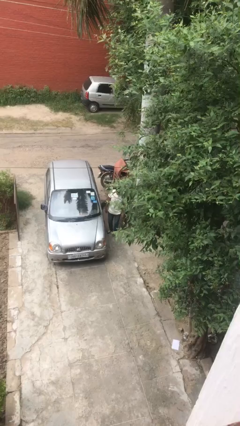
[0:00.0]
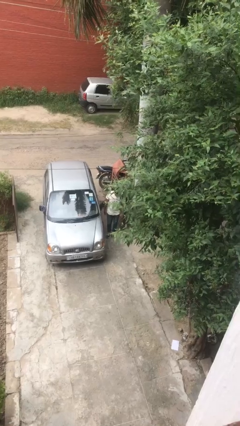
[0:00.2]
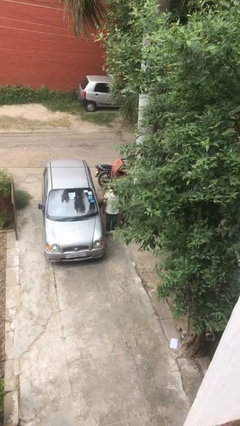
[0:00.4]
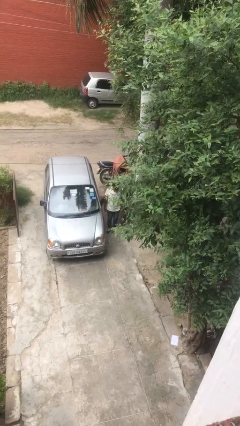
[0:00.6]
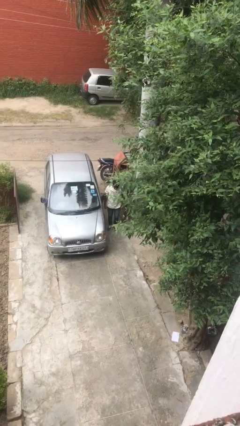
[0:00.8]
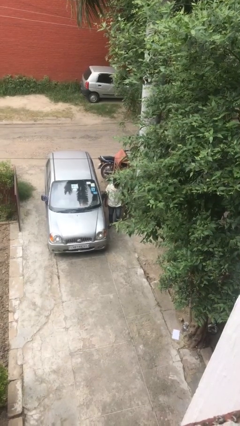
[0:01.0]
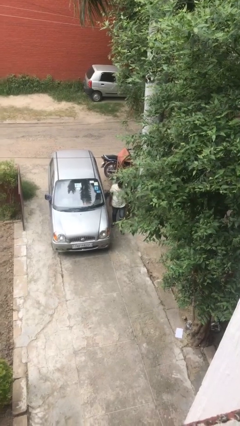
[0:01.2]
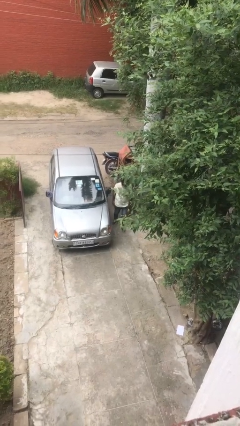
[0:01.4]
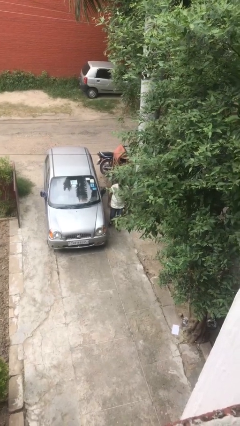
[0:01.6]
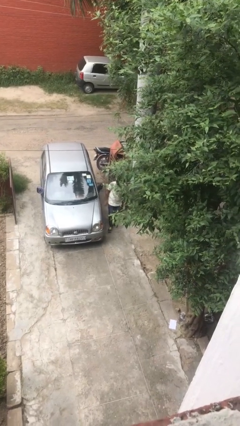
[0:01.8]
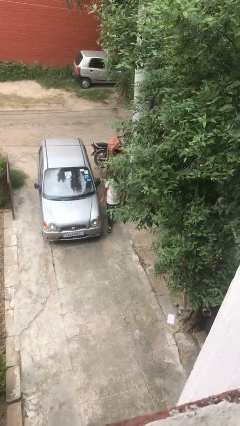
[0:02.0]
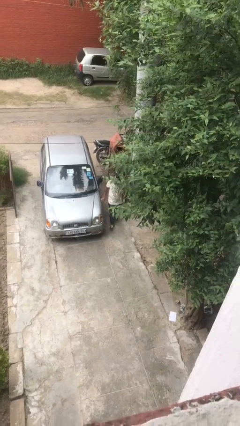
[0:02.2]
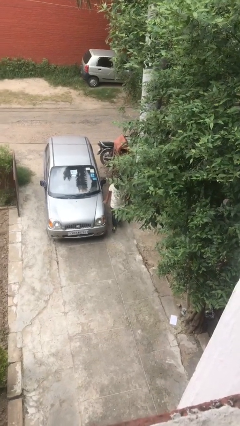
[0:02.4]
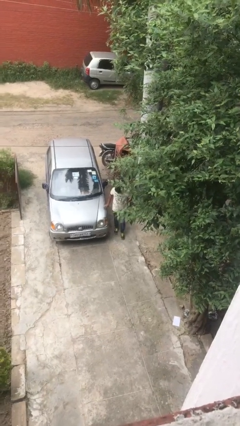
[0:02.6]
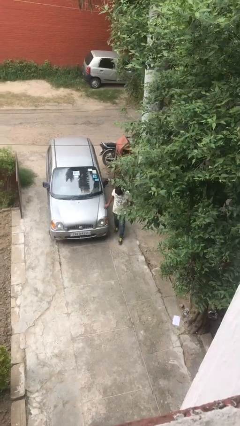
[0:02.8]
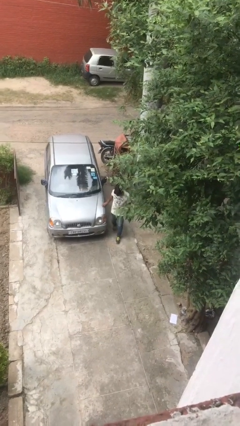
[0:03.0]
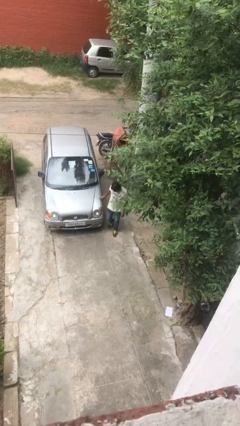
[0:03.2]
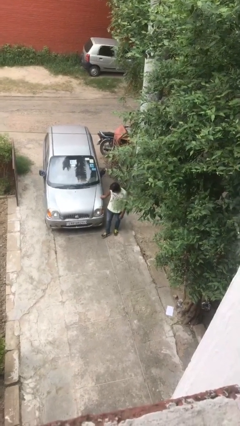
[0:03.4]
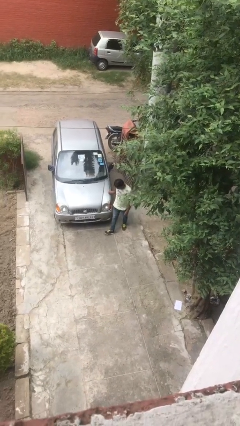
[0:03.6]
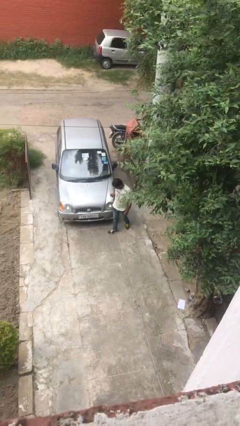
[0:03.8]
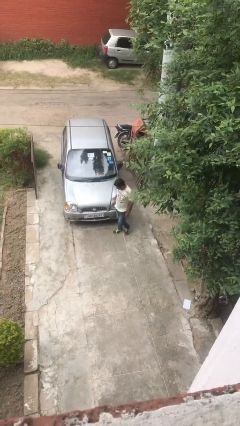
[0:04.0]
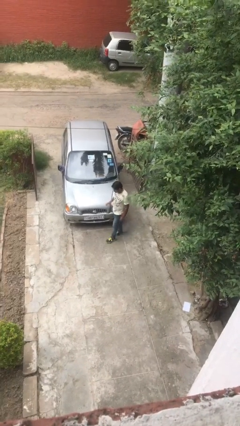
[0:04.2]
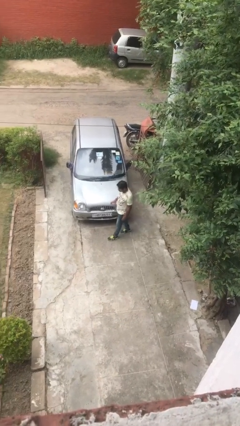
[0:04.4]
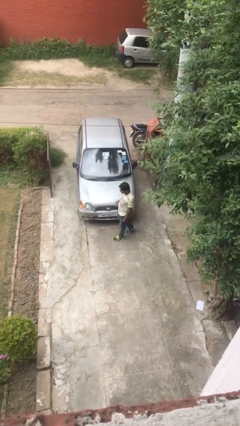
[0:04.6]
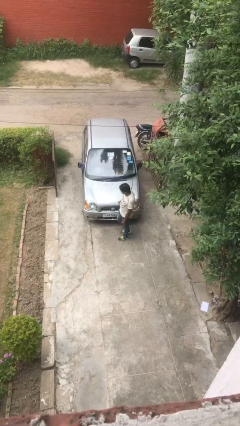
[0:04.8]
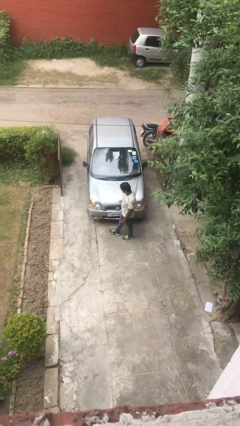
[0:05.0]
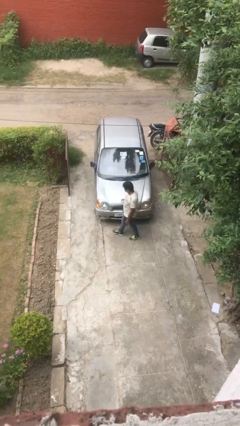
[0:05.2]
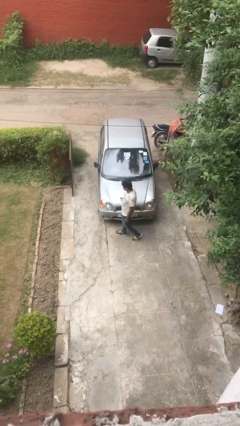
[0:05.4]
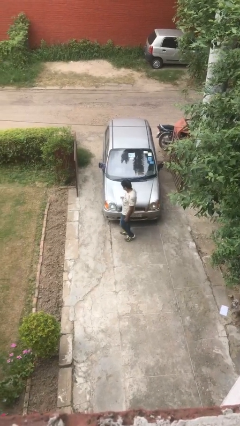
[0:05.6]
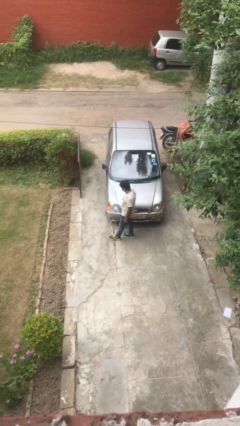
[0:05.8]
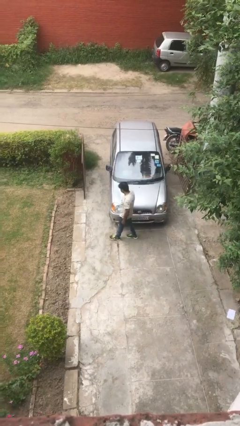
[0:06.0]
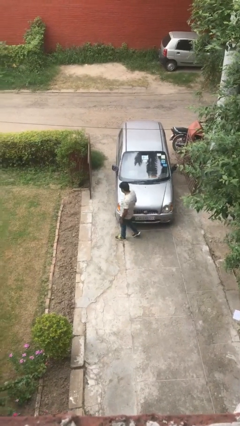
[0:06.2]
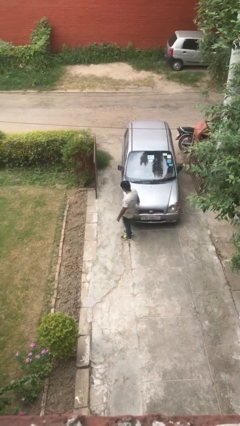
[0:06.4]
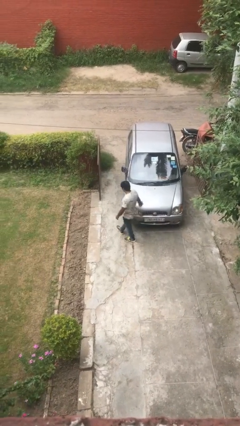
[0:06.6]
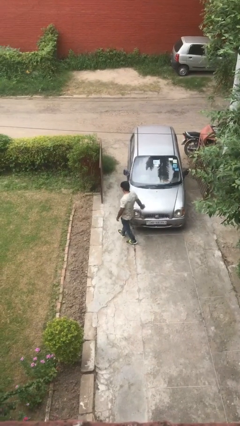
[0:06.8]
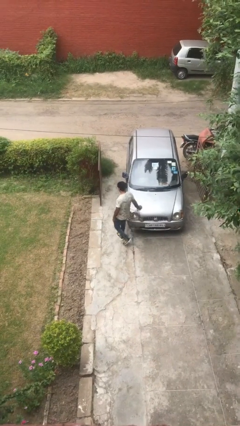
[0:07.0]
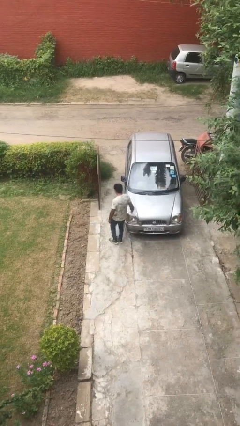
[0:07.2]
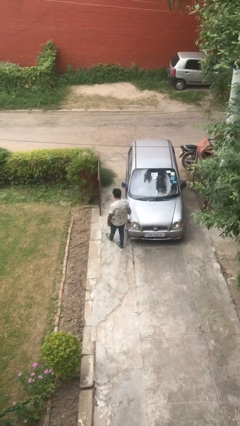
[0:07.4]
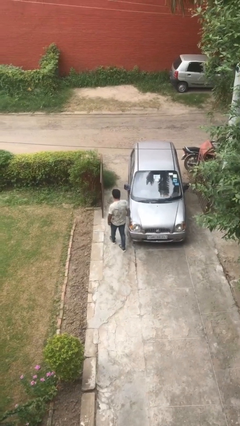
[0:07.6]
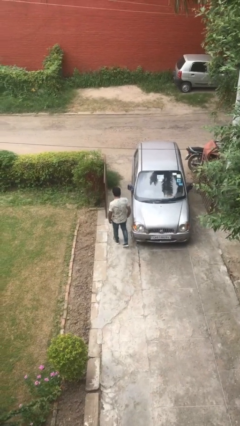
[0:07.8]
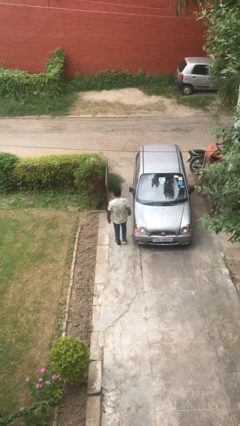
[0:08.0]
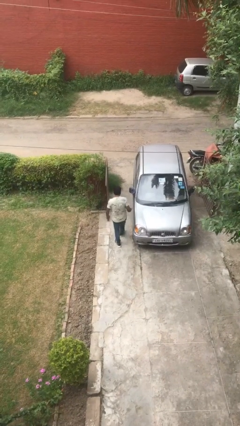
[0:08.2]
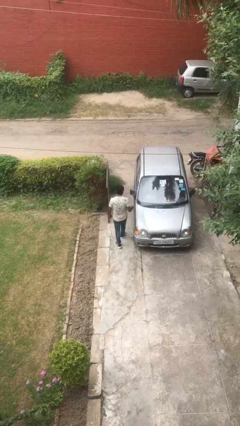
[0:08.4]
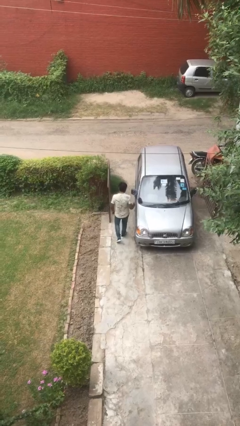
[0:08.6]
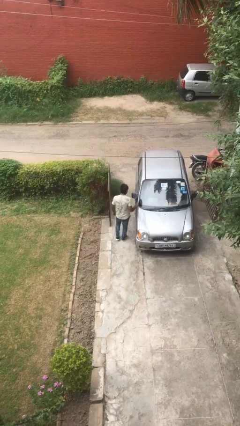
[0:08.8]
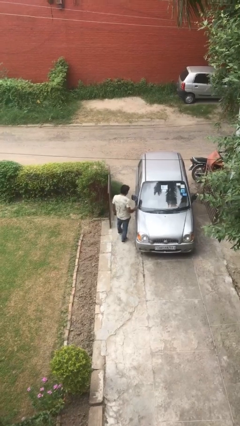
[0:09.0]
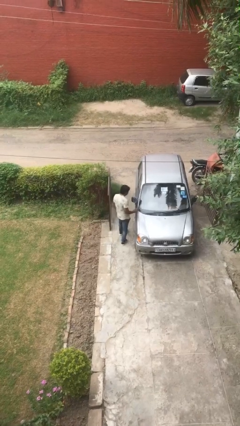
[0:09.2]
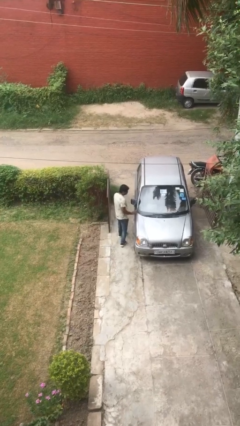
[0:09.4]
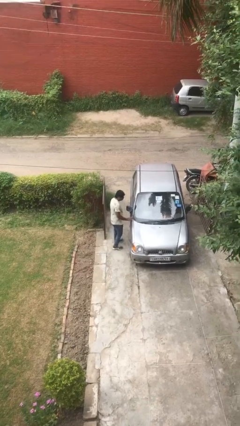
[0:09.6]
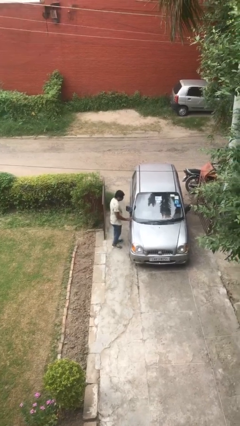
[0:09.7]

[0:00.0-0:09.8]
person walks around car

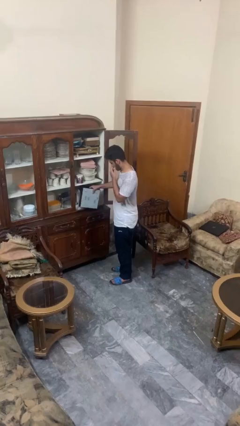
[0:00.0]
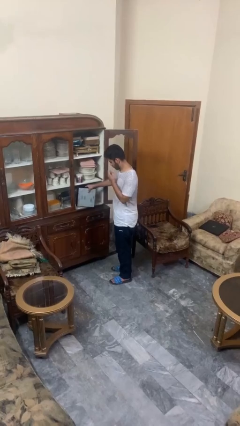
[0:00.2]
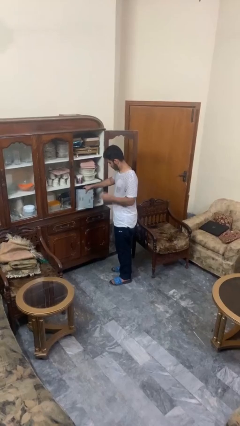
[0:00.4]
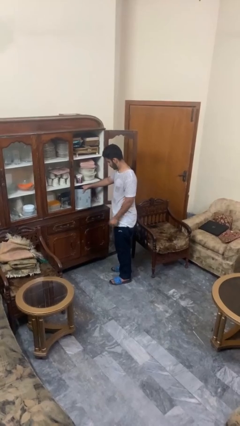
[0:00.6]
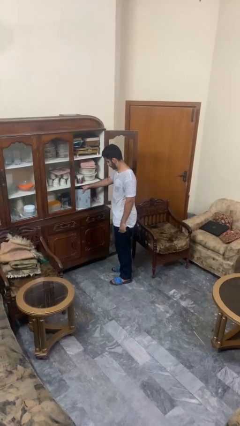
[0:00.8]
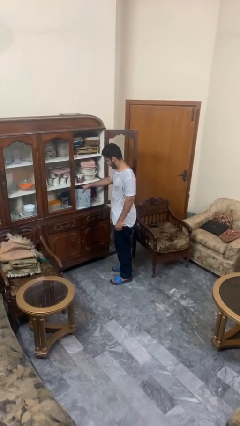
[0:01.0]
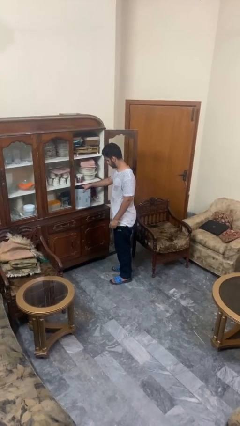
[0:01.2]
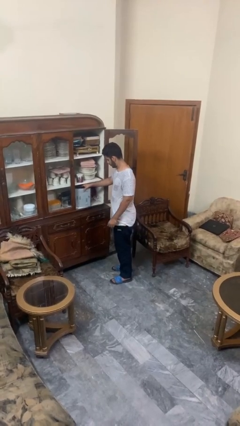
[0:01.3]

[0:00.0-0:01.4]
person puts down object into cabinet

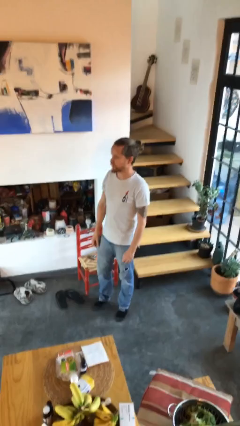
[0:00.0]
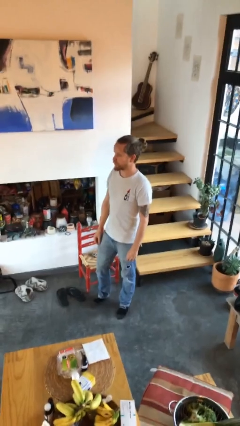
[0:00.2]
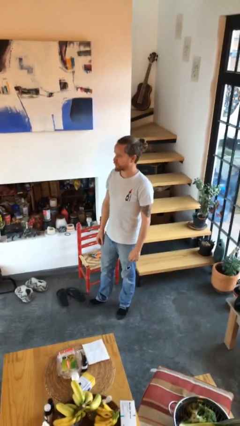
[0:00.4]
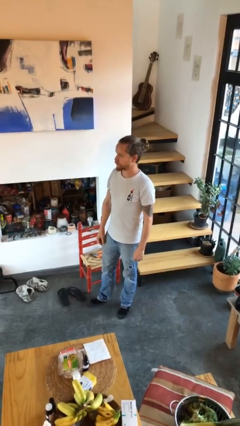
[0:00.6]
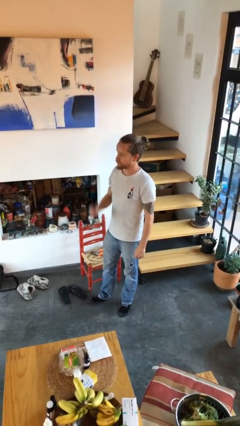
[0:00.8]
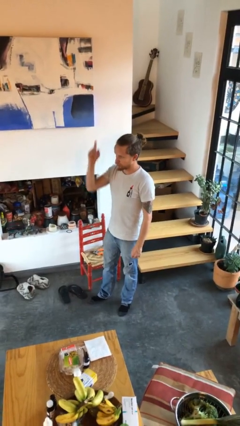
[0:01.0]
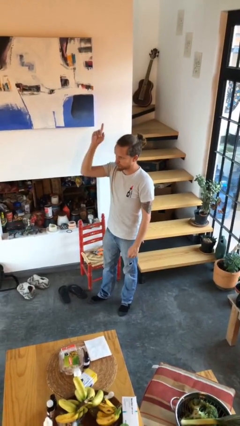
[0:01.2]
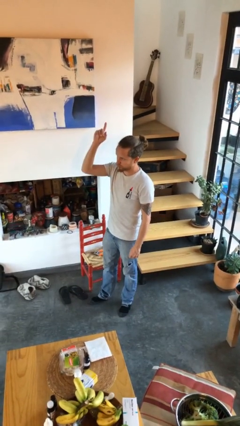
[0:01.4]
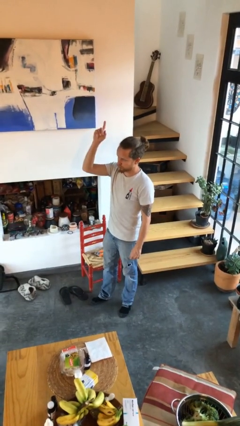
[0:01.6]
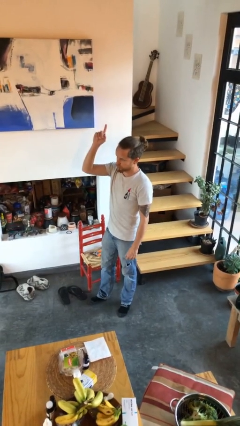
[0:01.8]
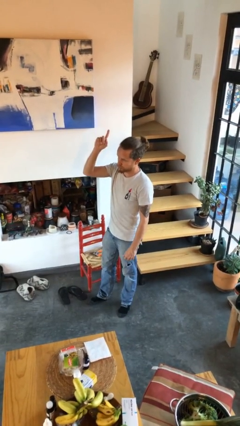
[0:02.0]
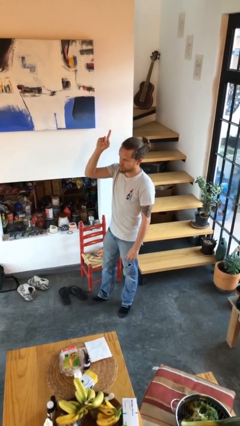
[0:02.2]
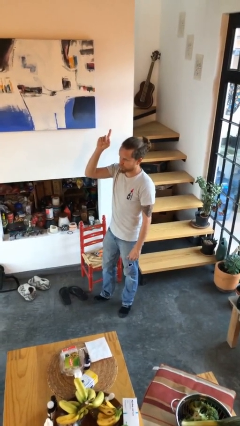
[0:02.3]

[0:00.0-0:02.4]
person gestures raise hand

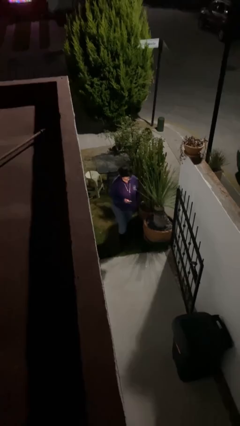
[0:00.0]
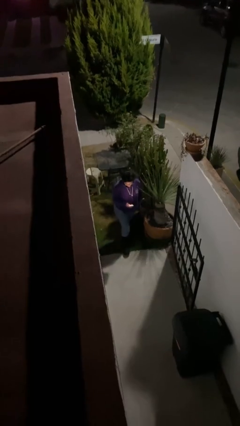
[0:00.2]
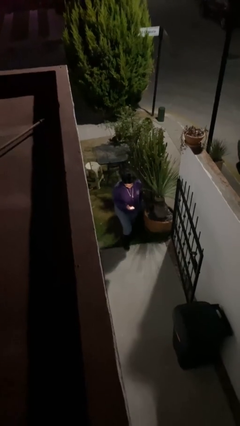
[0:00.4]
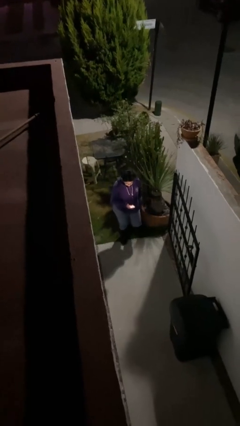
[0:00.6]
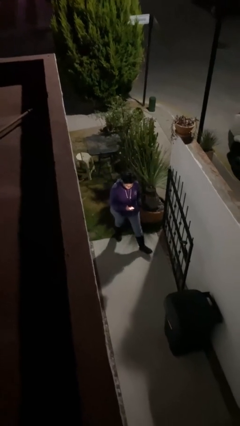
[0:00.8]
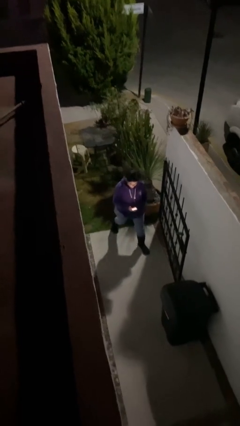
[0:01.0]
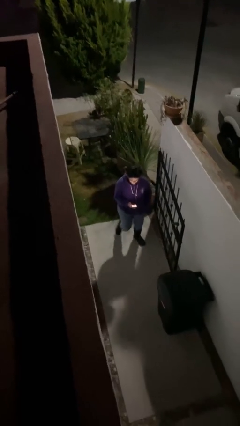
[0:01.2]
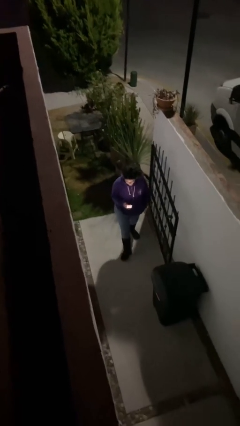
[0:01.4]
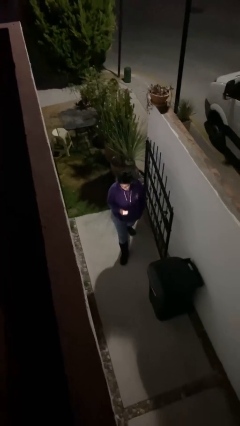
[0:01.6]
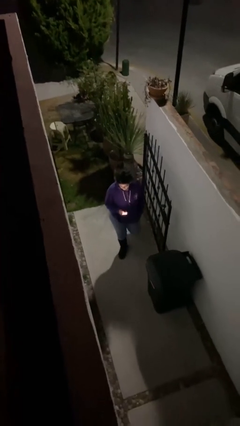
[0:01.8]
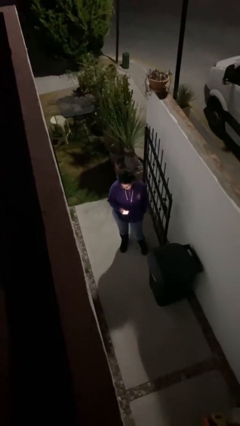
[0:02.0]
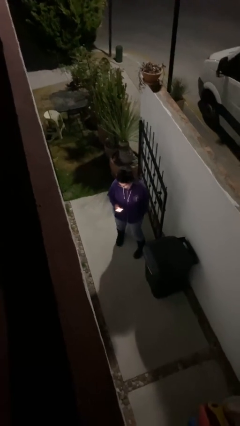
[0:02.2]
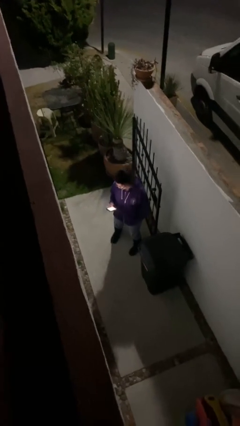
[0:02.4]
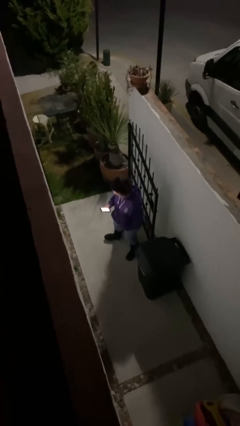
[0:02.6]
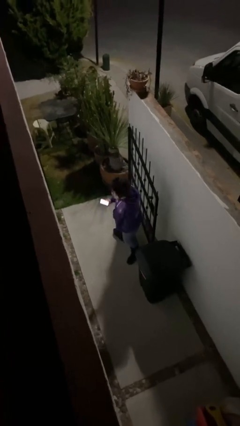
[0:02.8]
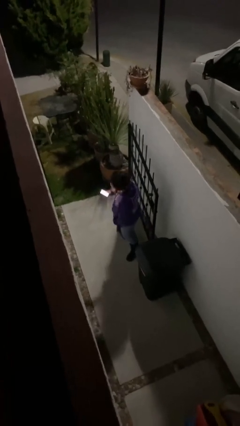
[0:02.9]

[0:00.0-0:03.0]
person enters scene through structure

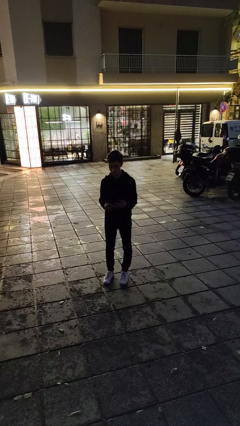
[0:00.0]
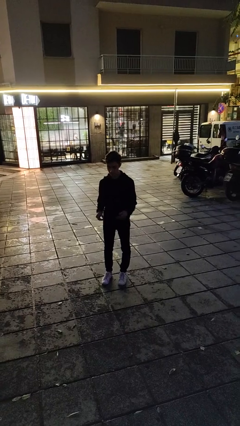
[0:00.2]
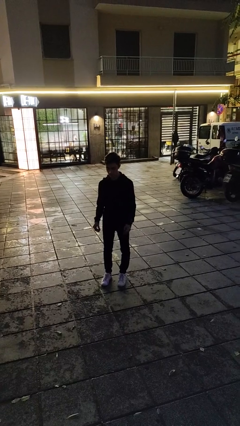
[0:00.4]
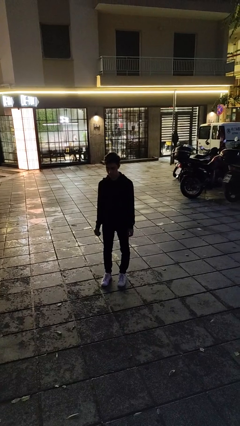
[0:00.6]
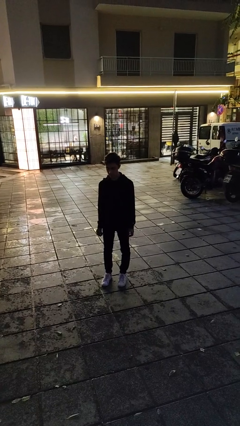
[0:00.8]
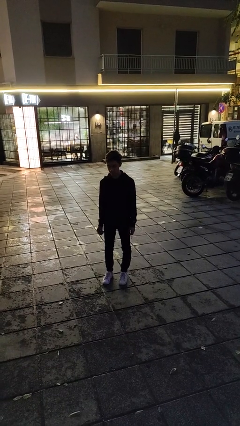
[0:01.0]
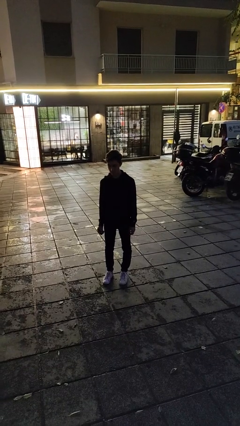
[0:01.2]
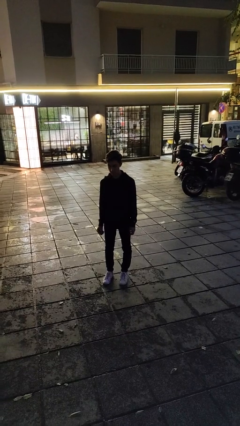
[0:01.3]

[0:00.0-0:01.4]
person takes off ring
